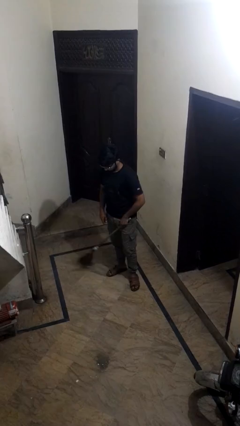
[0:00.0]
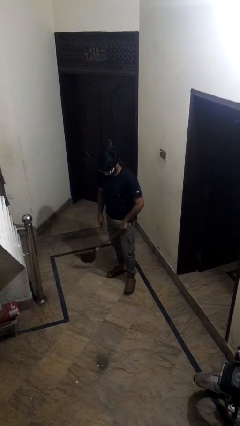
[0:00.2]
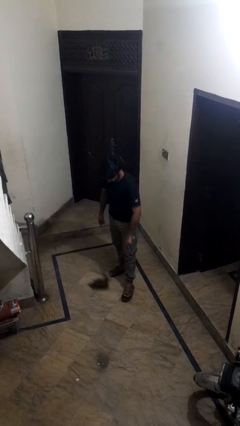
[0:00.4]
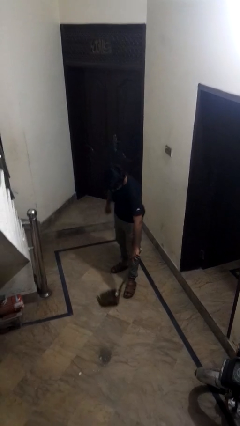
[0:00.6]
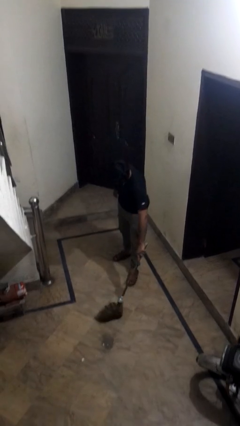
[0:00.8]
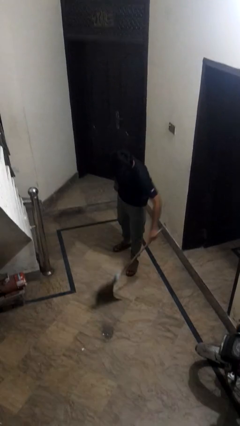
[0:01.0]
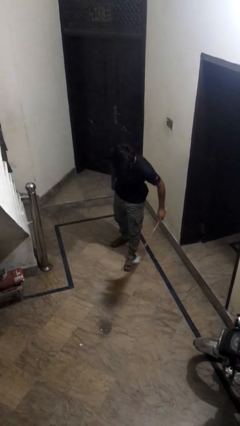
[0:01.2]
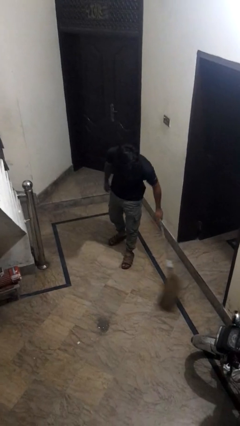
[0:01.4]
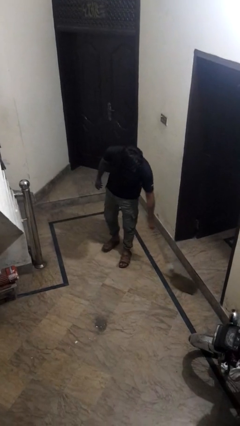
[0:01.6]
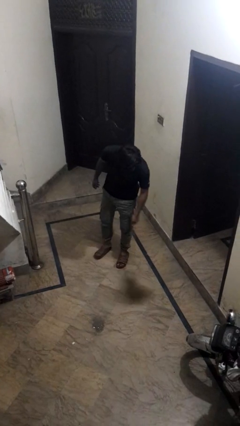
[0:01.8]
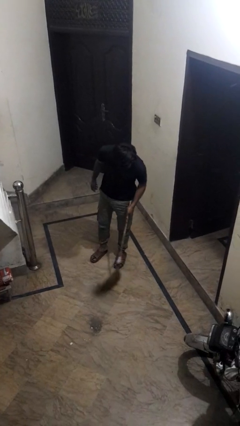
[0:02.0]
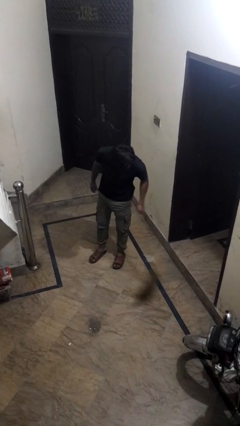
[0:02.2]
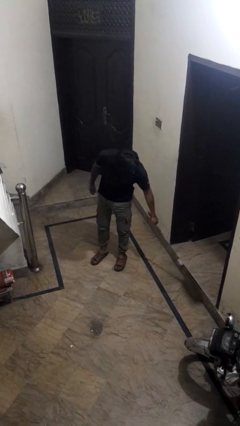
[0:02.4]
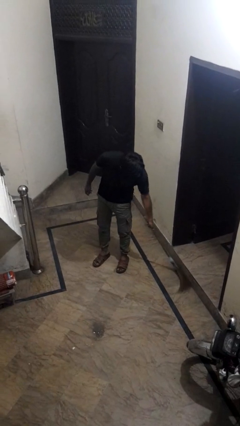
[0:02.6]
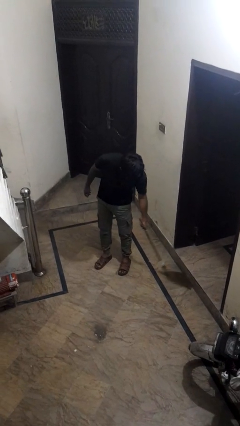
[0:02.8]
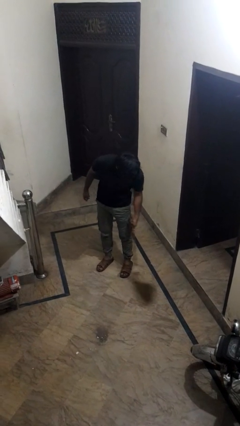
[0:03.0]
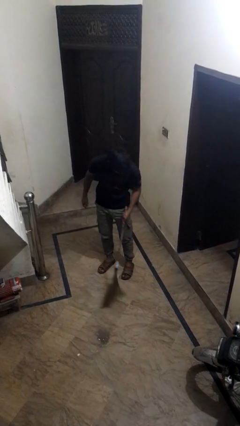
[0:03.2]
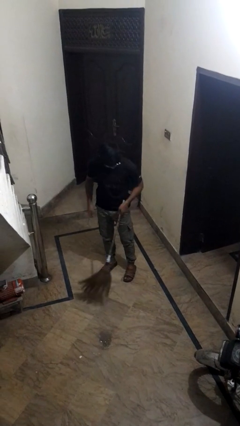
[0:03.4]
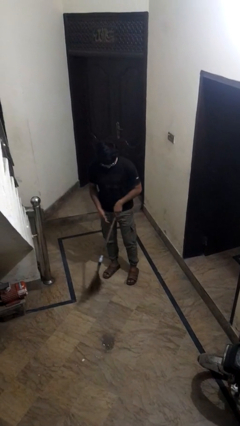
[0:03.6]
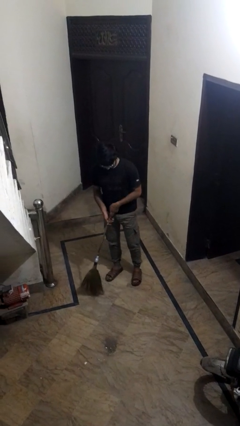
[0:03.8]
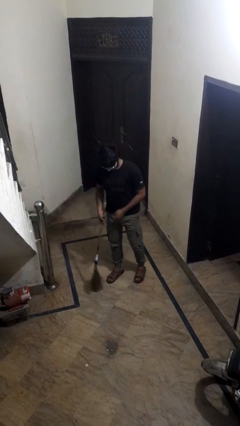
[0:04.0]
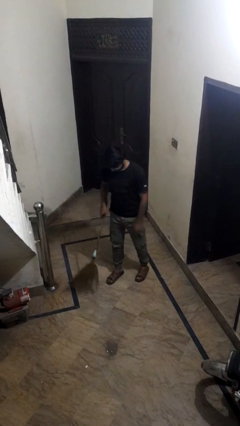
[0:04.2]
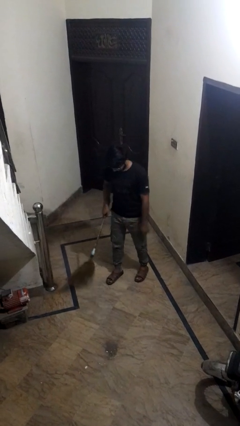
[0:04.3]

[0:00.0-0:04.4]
person sweeps floor

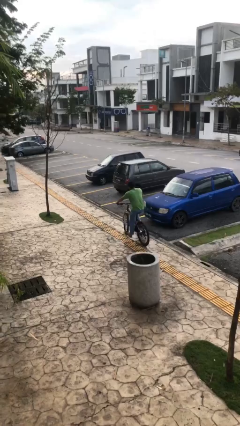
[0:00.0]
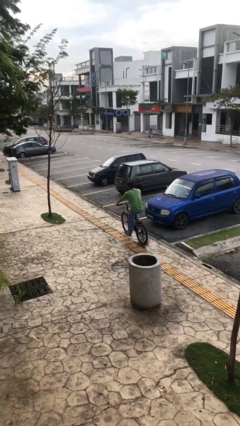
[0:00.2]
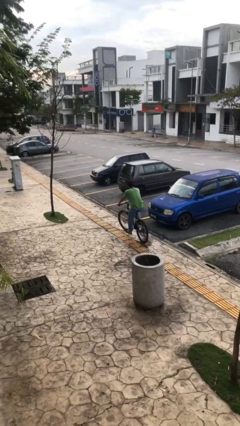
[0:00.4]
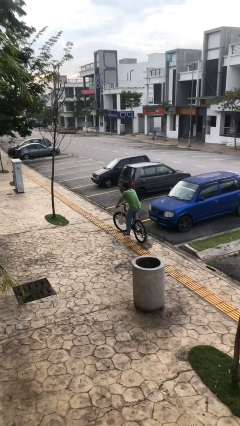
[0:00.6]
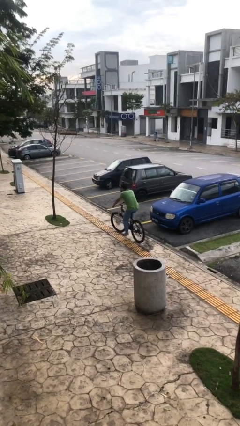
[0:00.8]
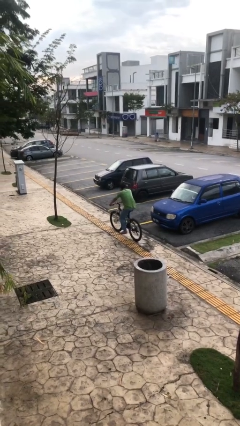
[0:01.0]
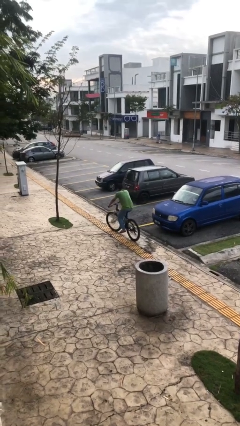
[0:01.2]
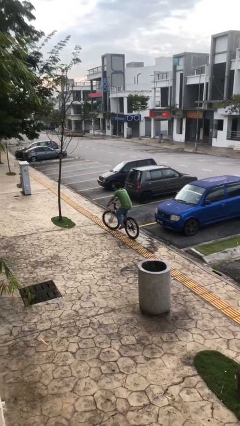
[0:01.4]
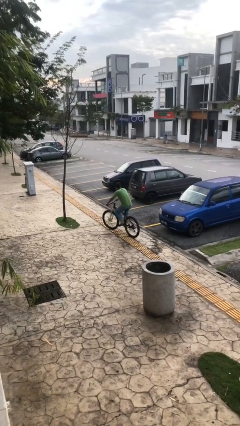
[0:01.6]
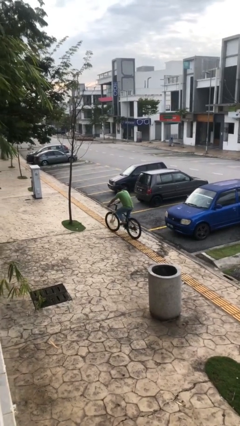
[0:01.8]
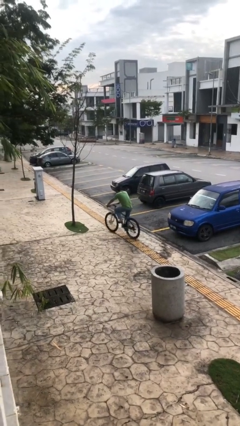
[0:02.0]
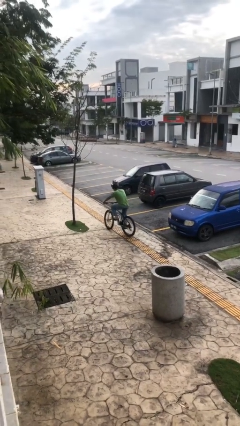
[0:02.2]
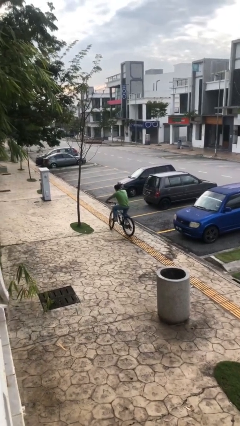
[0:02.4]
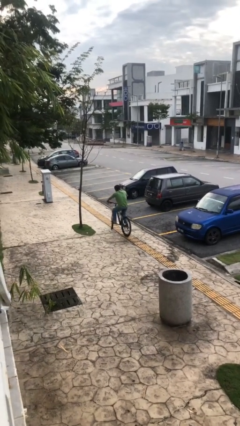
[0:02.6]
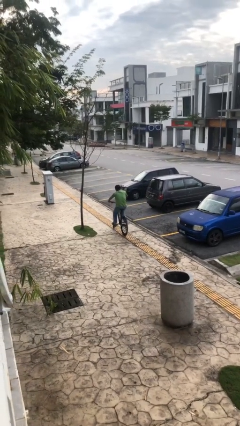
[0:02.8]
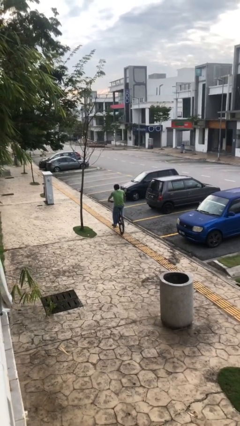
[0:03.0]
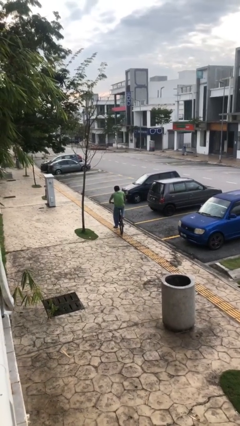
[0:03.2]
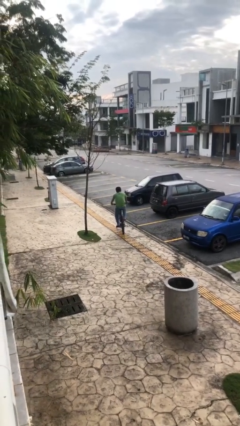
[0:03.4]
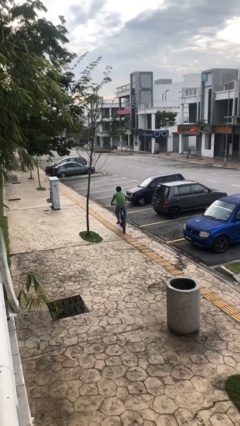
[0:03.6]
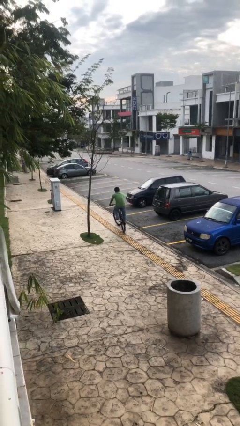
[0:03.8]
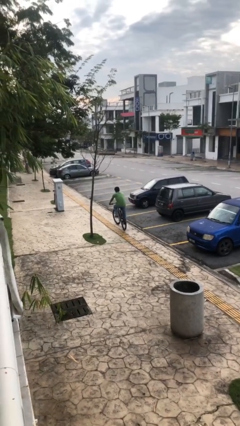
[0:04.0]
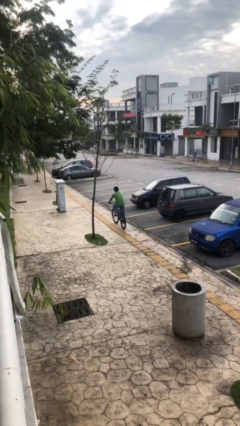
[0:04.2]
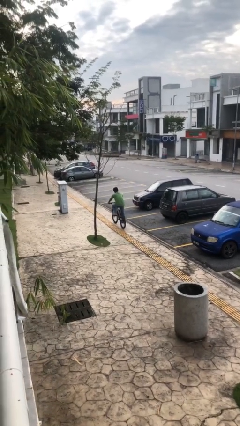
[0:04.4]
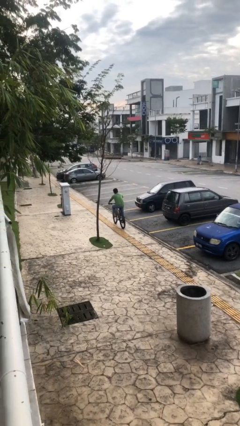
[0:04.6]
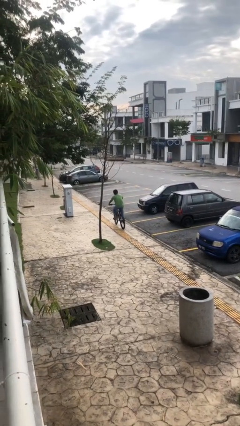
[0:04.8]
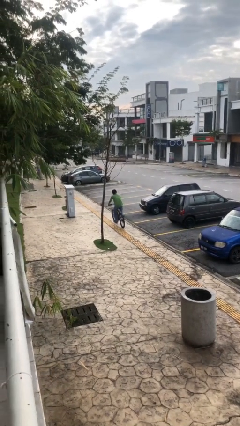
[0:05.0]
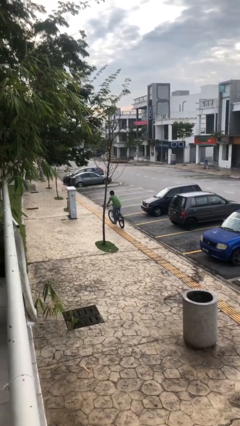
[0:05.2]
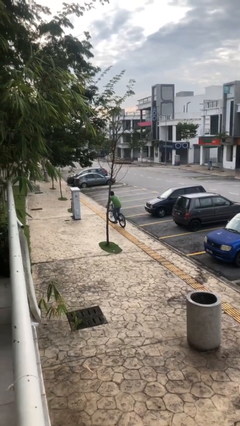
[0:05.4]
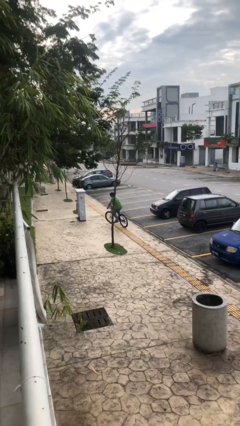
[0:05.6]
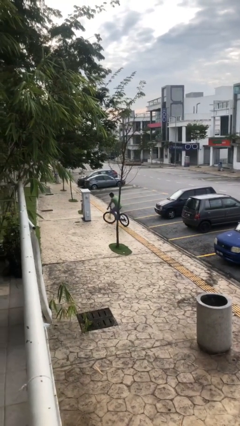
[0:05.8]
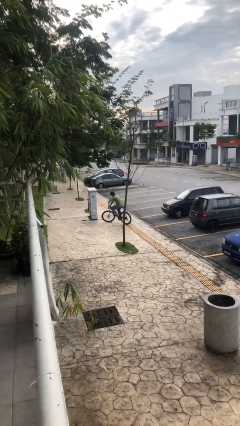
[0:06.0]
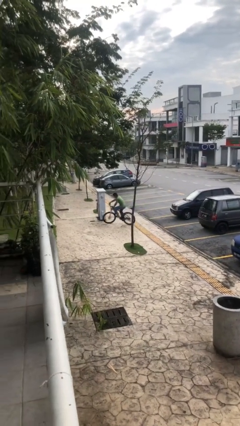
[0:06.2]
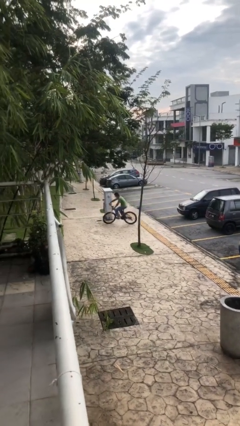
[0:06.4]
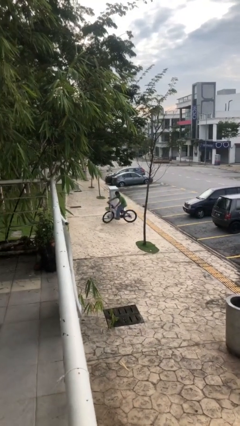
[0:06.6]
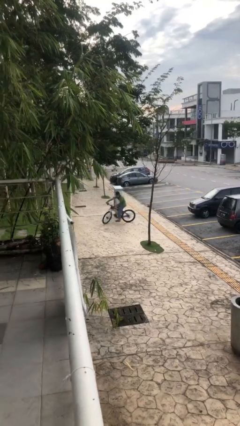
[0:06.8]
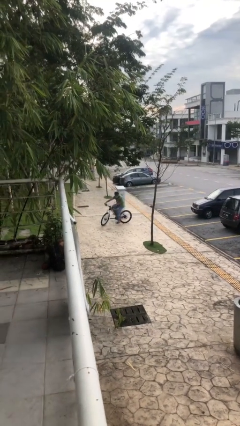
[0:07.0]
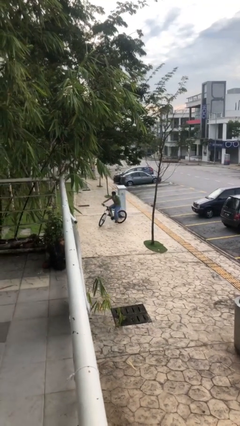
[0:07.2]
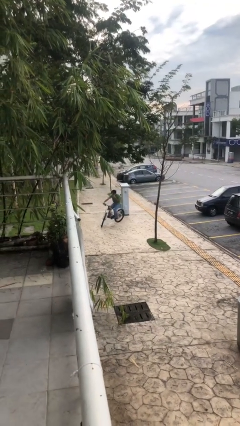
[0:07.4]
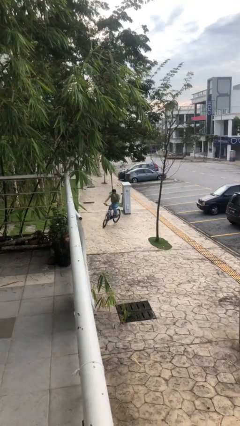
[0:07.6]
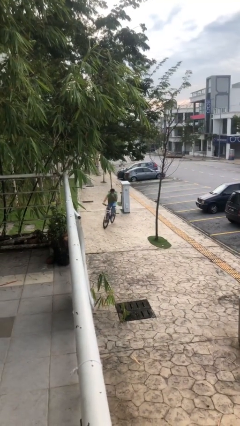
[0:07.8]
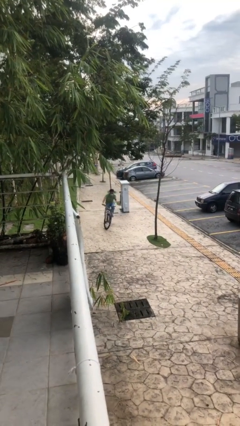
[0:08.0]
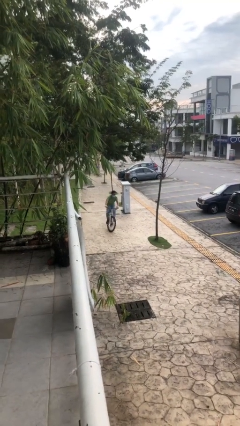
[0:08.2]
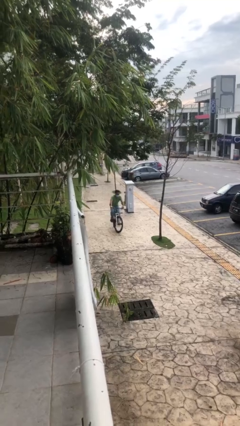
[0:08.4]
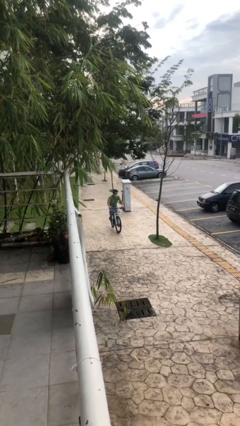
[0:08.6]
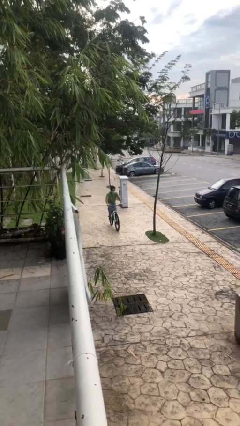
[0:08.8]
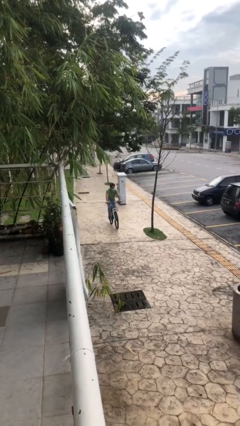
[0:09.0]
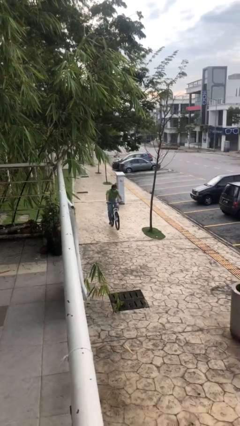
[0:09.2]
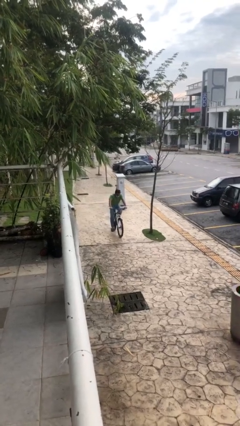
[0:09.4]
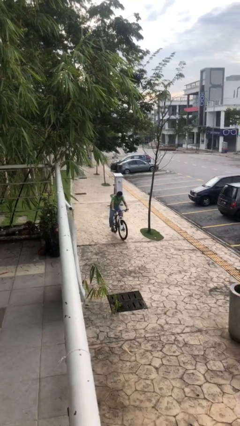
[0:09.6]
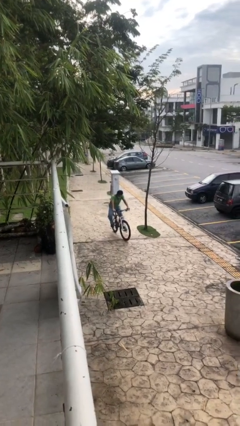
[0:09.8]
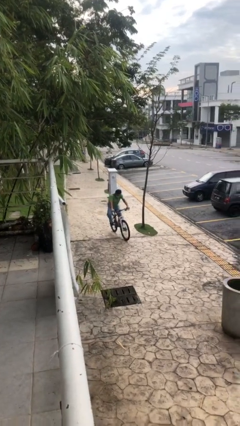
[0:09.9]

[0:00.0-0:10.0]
person rides bicycle

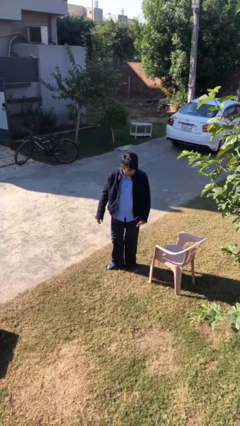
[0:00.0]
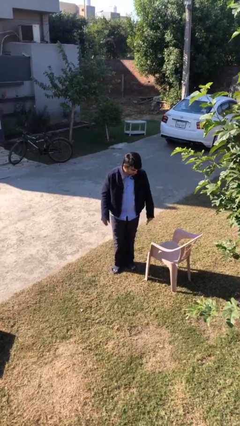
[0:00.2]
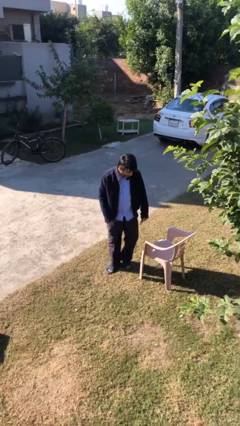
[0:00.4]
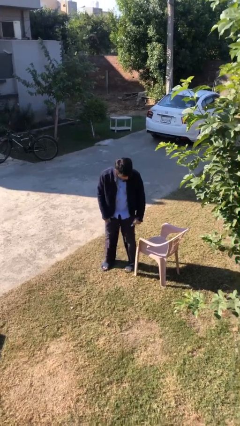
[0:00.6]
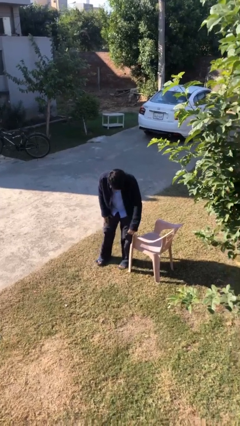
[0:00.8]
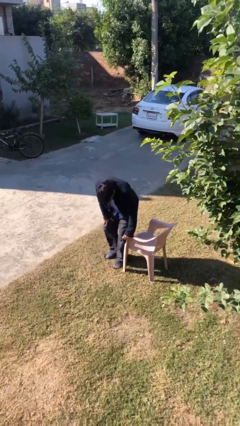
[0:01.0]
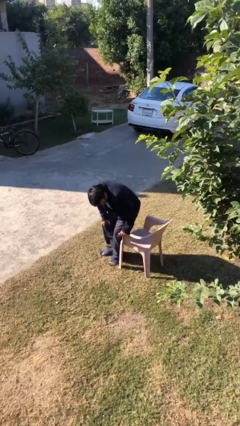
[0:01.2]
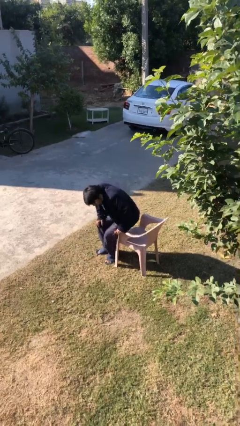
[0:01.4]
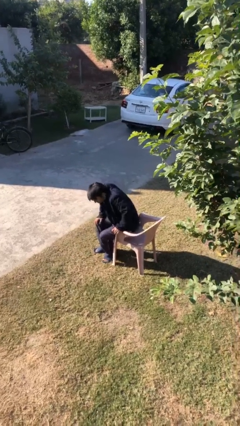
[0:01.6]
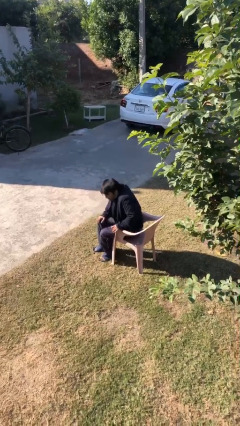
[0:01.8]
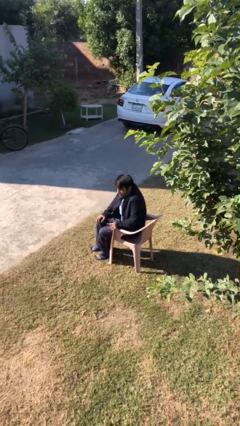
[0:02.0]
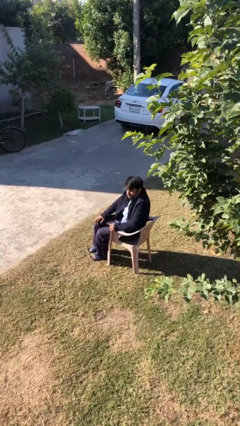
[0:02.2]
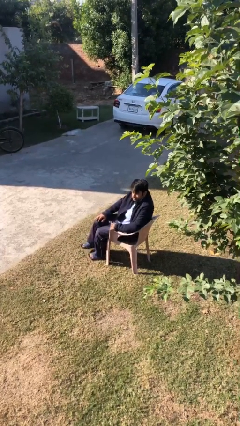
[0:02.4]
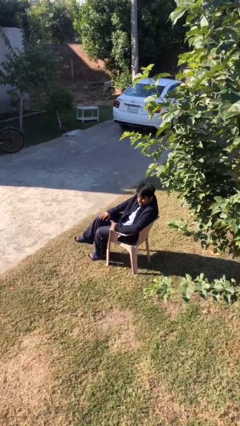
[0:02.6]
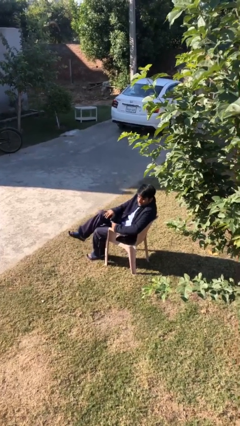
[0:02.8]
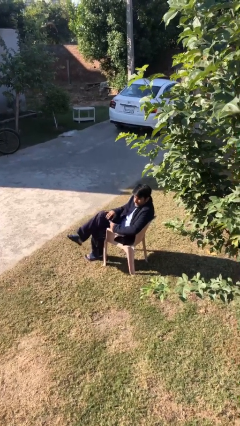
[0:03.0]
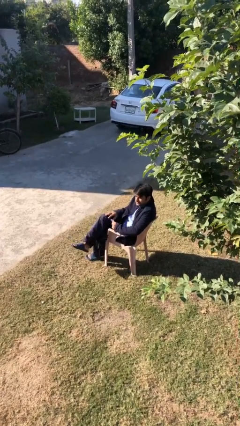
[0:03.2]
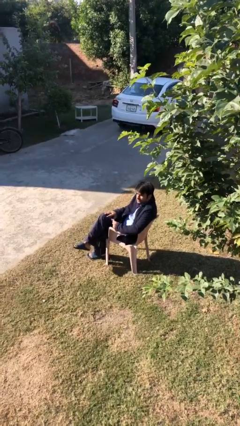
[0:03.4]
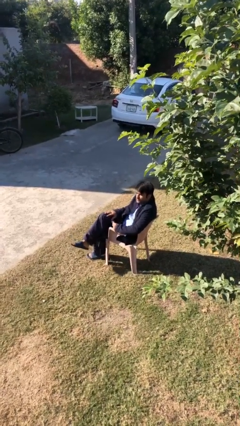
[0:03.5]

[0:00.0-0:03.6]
person sits down

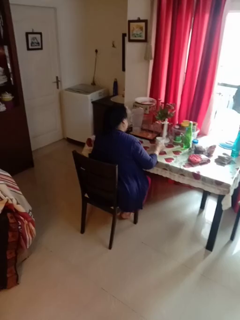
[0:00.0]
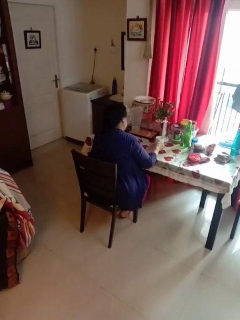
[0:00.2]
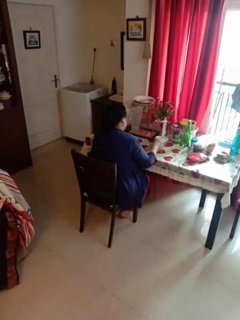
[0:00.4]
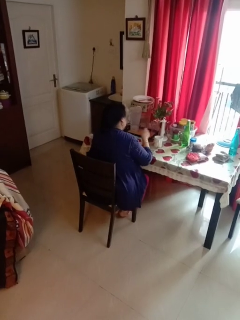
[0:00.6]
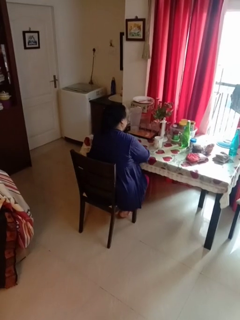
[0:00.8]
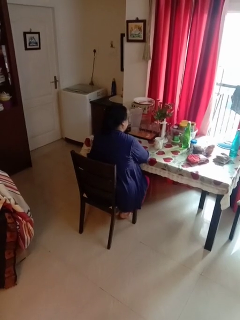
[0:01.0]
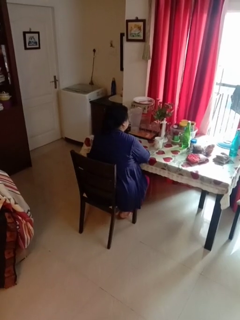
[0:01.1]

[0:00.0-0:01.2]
person puts down object on table
